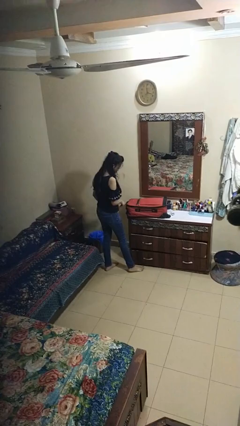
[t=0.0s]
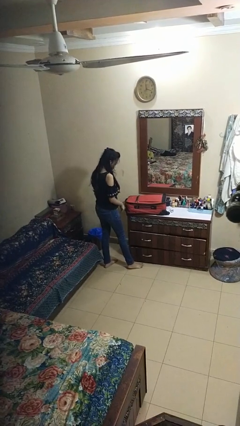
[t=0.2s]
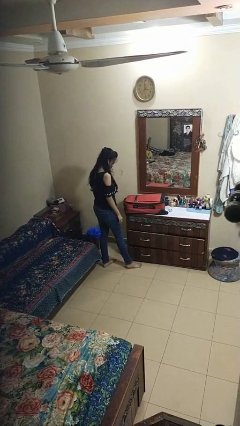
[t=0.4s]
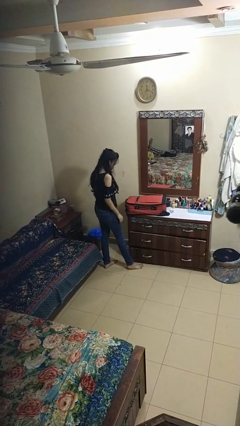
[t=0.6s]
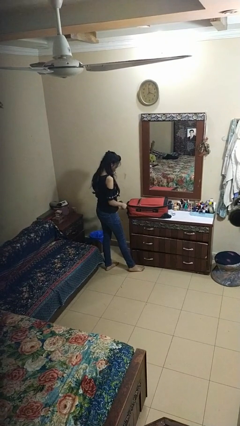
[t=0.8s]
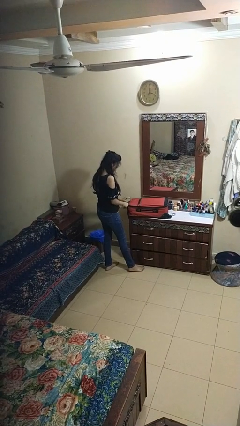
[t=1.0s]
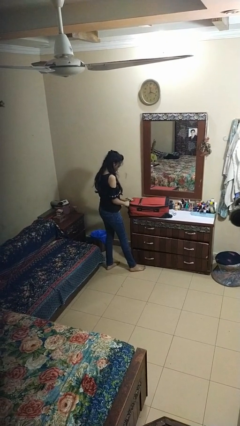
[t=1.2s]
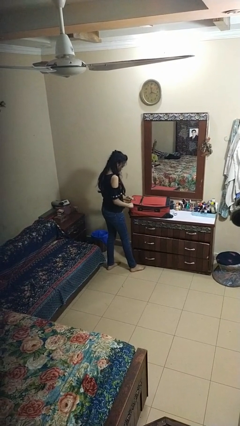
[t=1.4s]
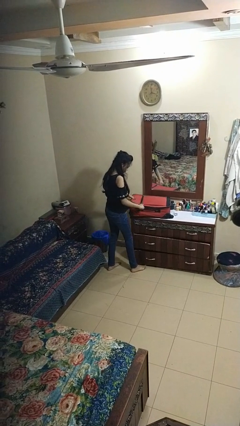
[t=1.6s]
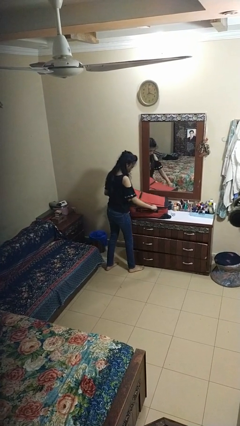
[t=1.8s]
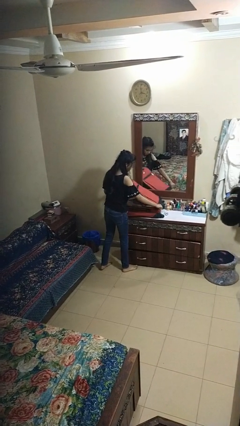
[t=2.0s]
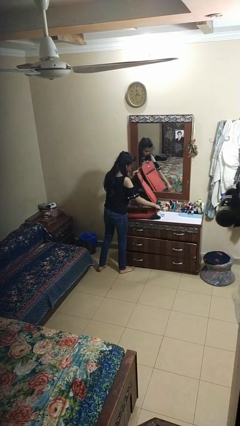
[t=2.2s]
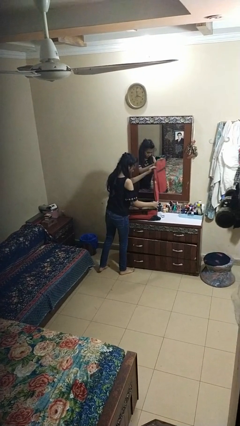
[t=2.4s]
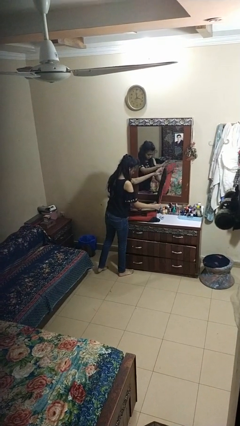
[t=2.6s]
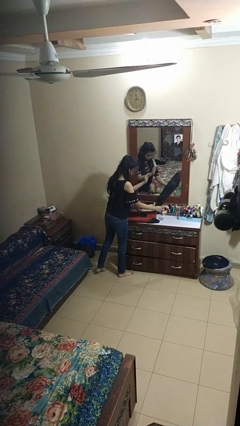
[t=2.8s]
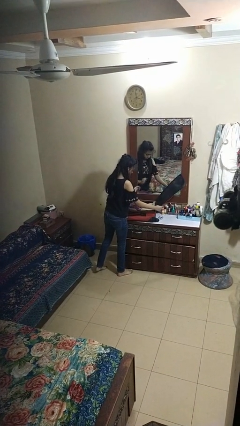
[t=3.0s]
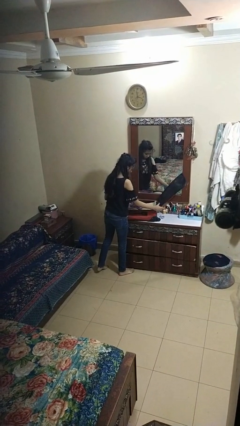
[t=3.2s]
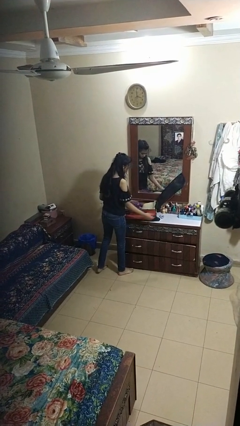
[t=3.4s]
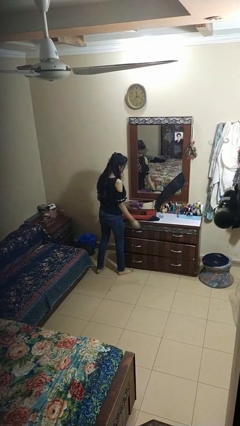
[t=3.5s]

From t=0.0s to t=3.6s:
person opens suitcase

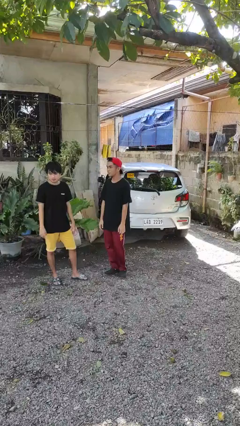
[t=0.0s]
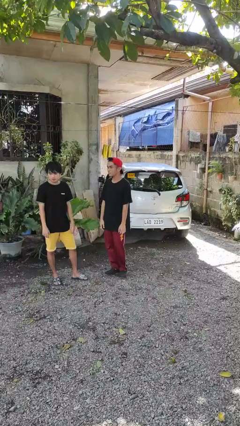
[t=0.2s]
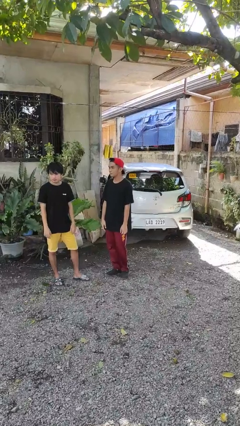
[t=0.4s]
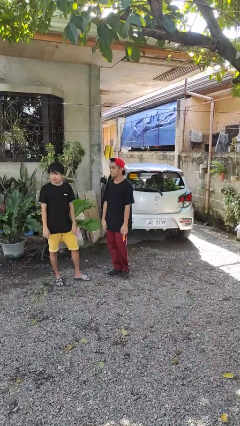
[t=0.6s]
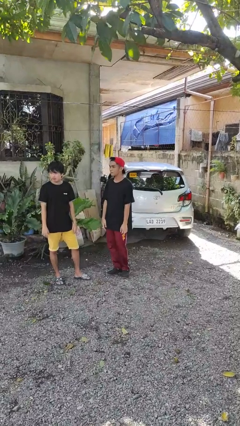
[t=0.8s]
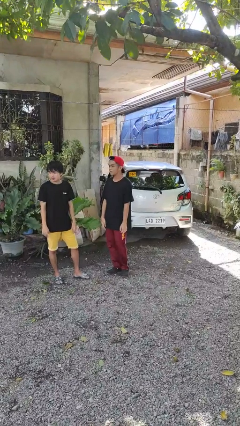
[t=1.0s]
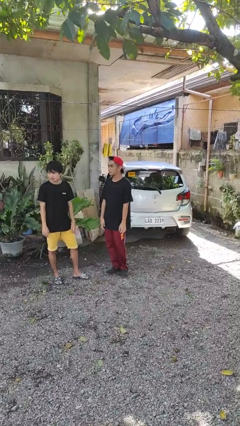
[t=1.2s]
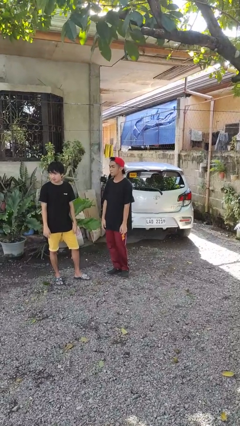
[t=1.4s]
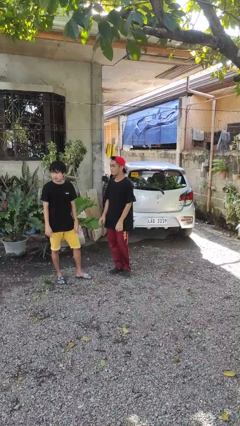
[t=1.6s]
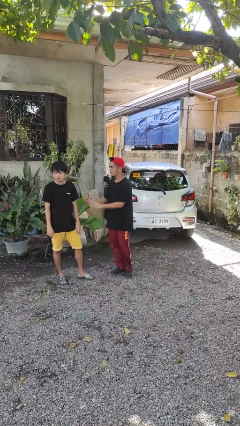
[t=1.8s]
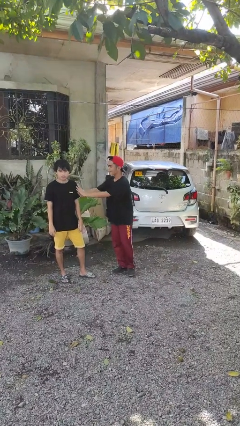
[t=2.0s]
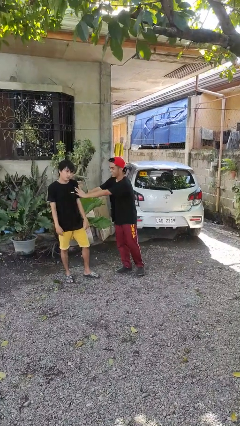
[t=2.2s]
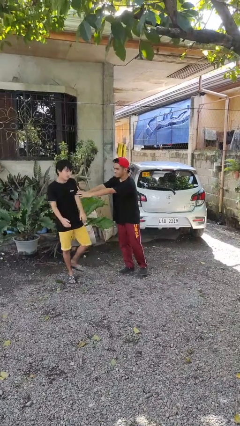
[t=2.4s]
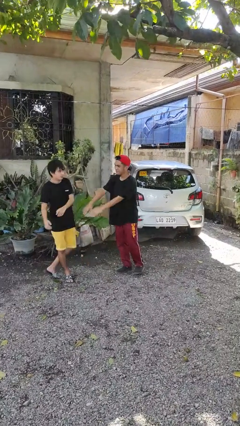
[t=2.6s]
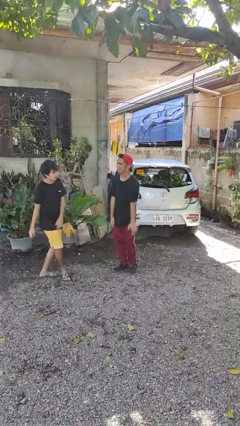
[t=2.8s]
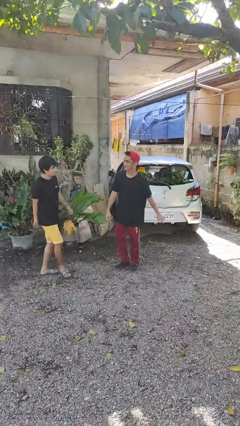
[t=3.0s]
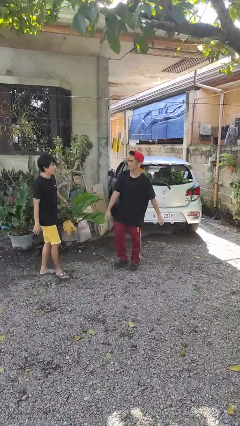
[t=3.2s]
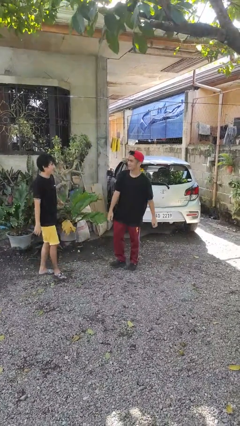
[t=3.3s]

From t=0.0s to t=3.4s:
person shoves person

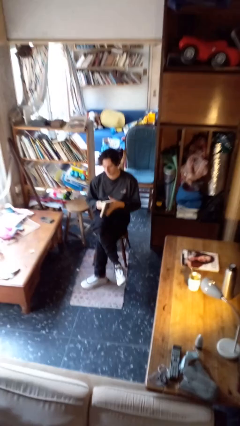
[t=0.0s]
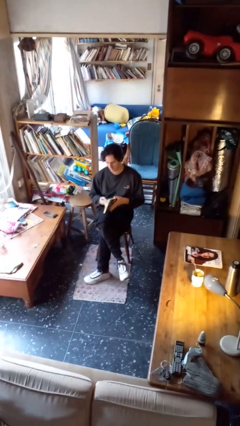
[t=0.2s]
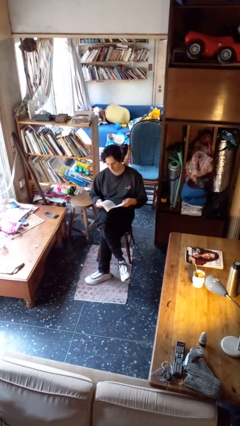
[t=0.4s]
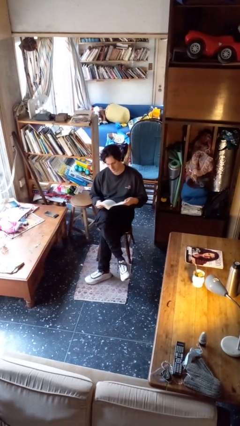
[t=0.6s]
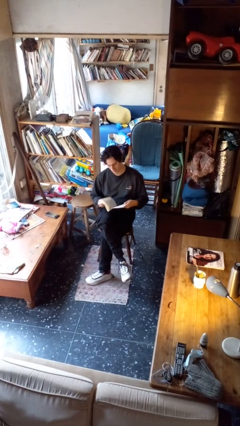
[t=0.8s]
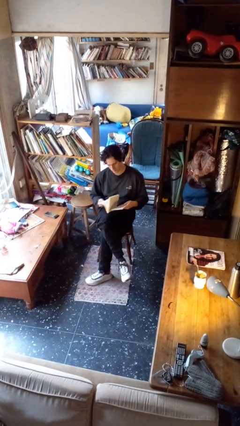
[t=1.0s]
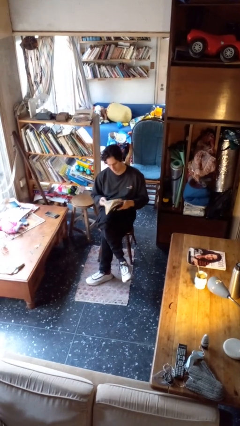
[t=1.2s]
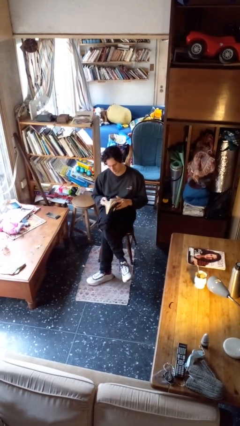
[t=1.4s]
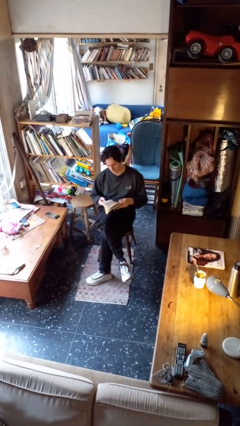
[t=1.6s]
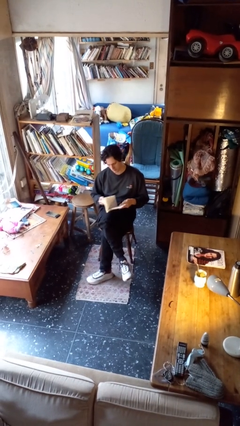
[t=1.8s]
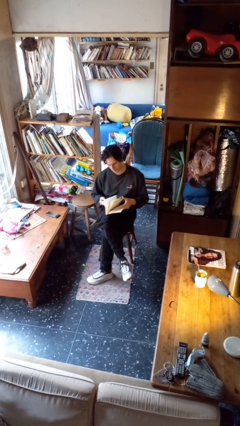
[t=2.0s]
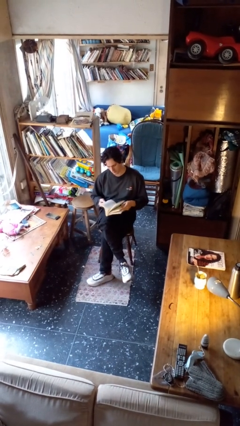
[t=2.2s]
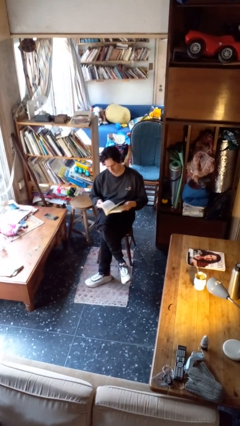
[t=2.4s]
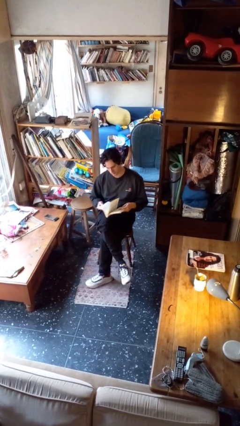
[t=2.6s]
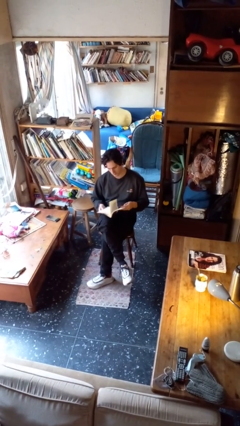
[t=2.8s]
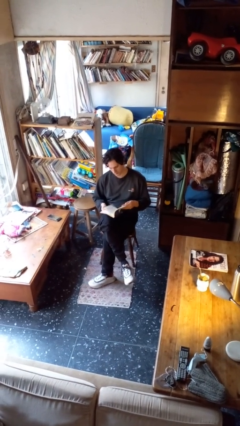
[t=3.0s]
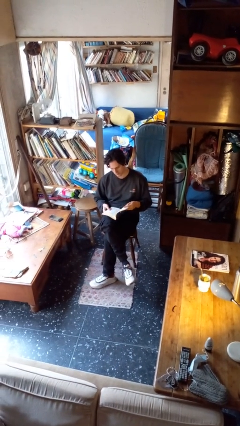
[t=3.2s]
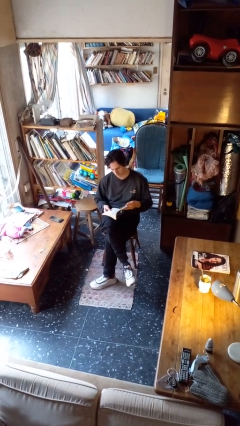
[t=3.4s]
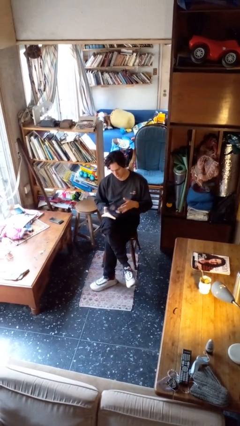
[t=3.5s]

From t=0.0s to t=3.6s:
person reads book

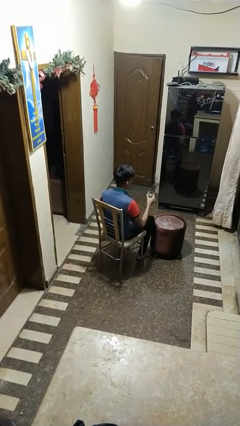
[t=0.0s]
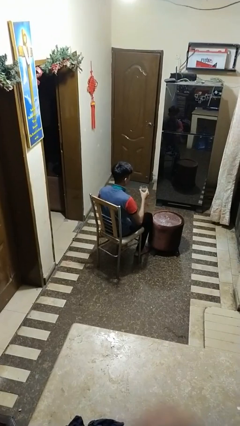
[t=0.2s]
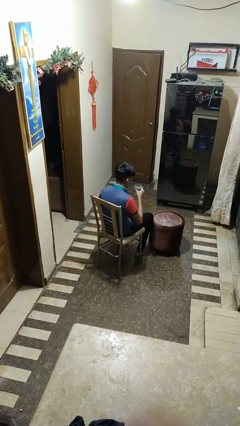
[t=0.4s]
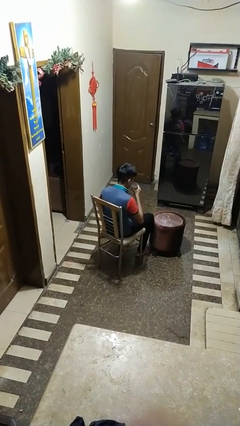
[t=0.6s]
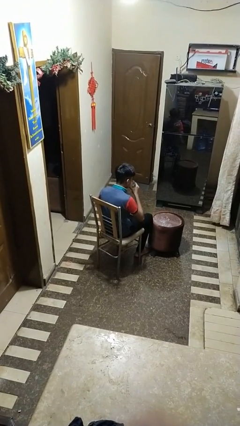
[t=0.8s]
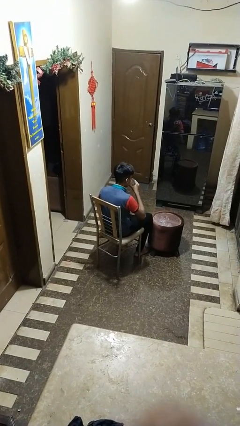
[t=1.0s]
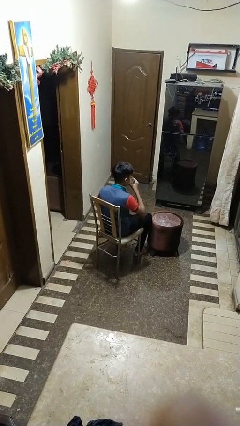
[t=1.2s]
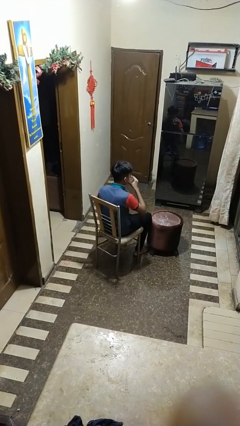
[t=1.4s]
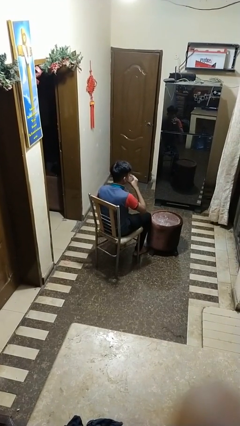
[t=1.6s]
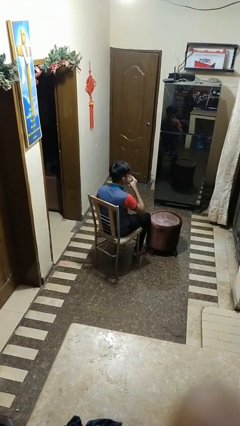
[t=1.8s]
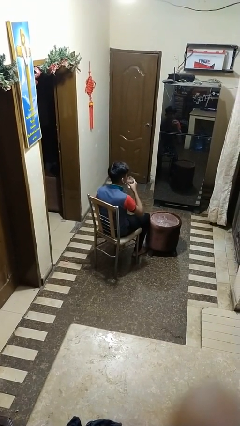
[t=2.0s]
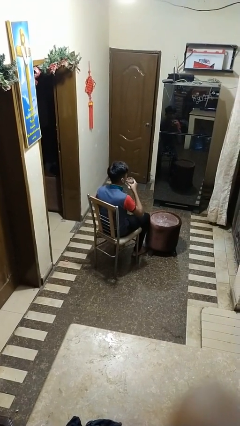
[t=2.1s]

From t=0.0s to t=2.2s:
person drinks from shotglass

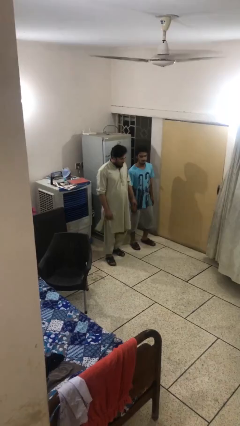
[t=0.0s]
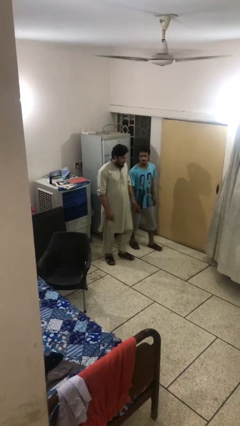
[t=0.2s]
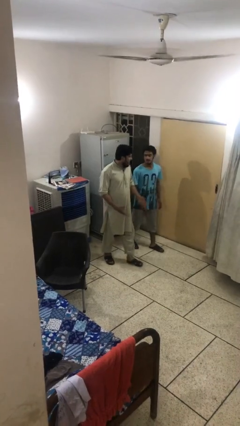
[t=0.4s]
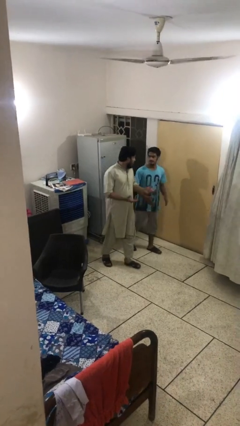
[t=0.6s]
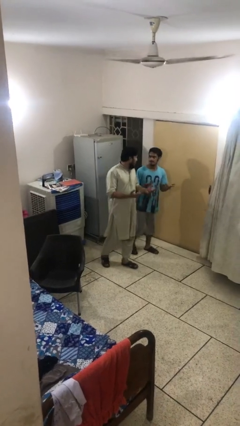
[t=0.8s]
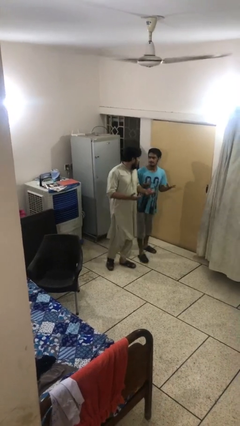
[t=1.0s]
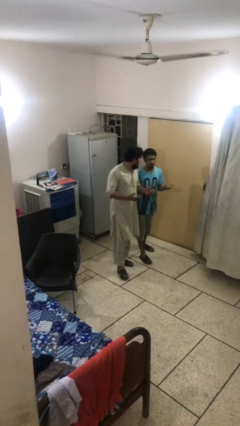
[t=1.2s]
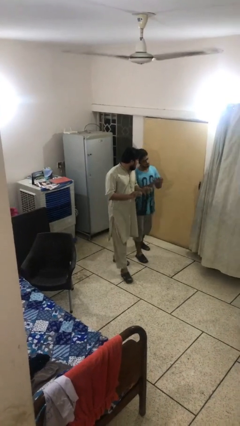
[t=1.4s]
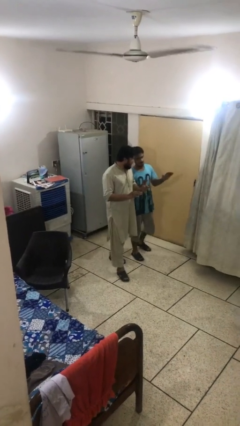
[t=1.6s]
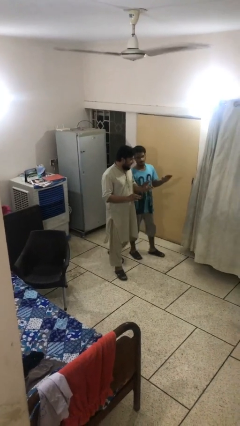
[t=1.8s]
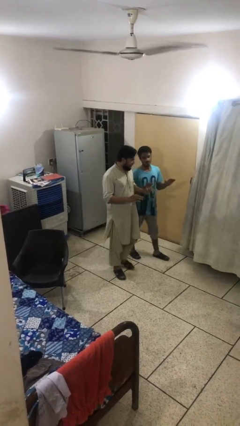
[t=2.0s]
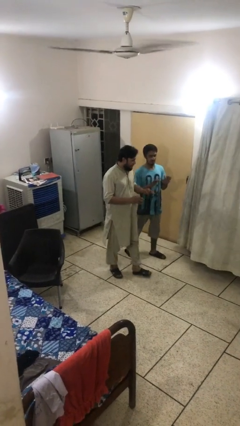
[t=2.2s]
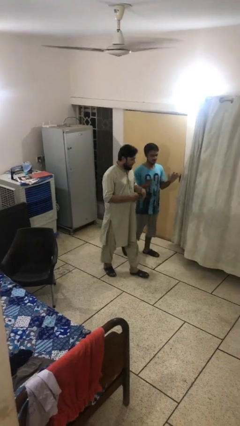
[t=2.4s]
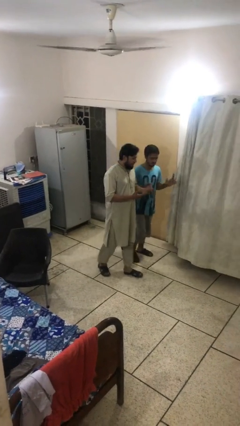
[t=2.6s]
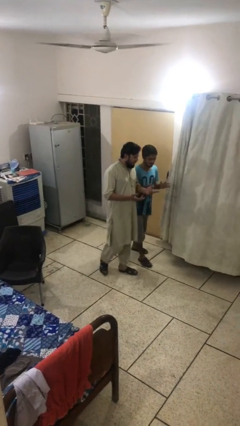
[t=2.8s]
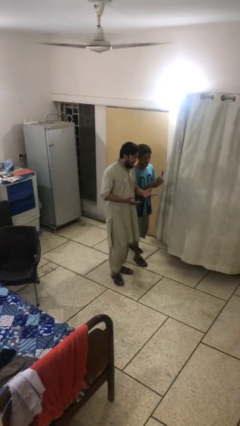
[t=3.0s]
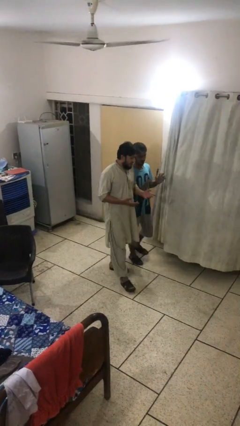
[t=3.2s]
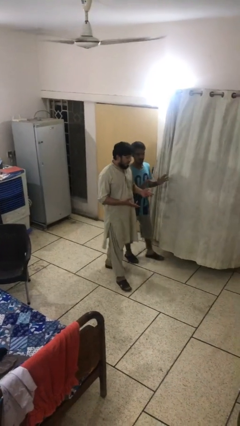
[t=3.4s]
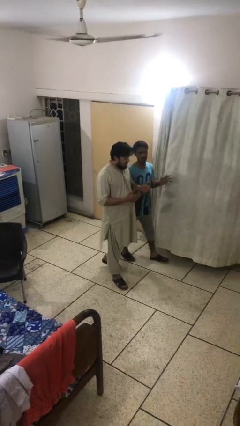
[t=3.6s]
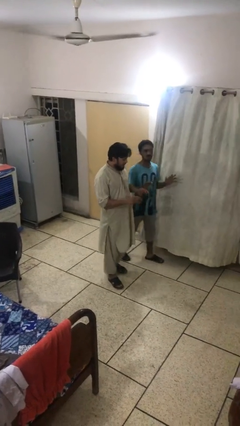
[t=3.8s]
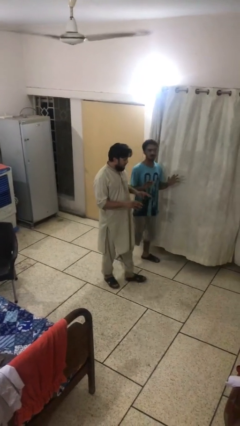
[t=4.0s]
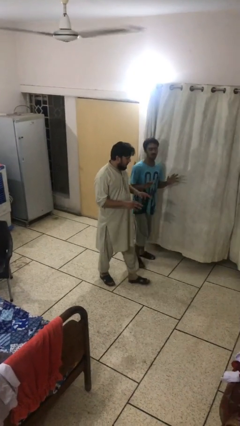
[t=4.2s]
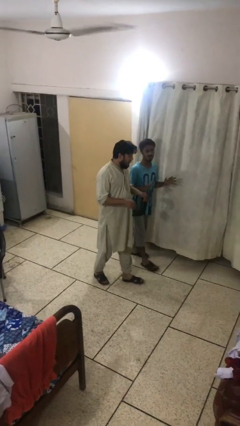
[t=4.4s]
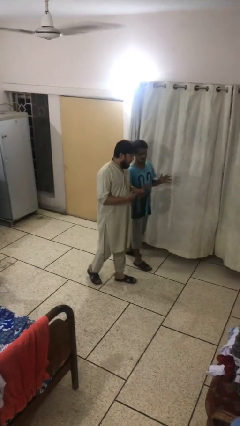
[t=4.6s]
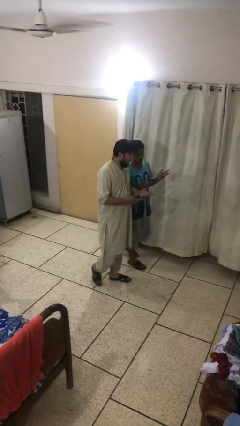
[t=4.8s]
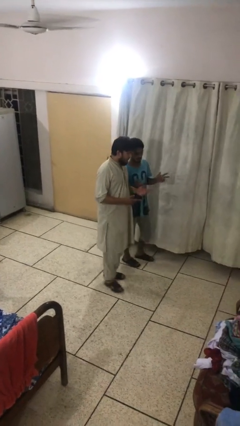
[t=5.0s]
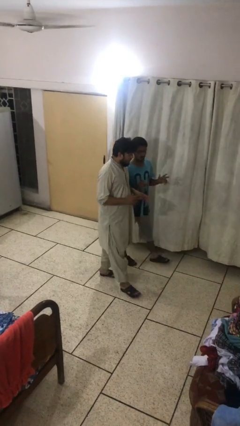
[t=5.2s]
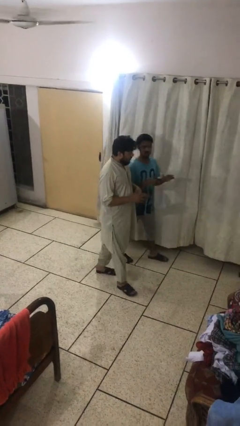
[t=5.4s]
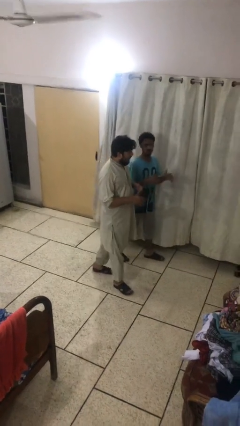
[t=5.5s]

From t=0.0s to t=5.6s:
person talks to person
